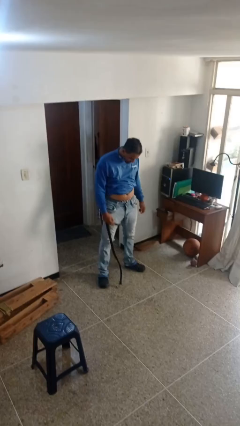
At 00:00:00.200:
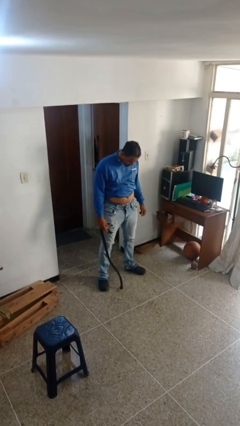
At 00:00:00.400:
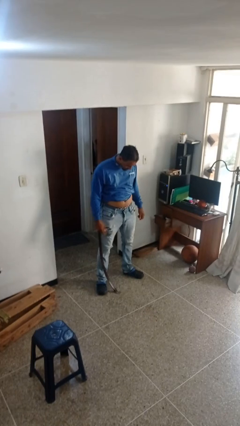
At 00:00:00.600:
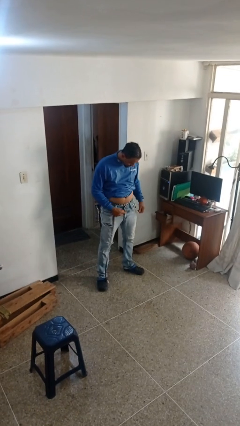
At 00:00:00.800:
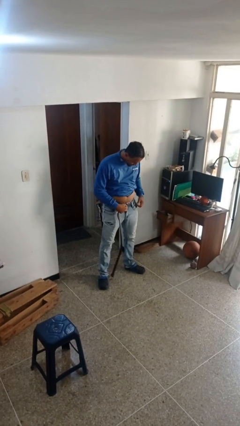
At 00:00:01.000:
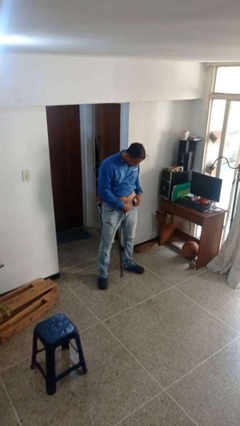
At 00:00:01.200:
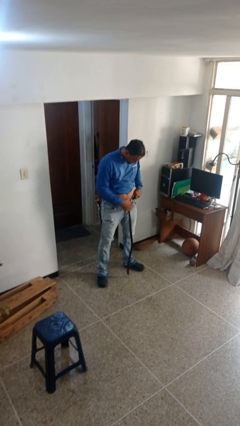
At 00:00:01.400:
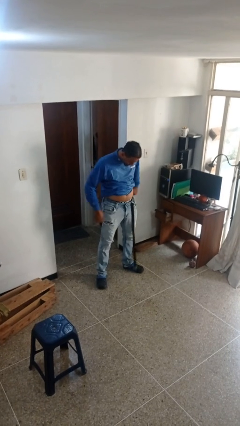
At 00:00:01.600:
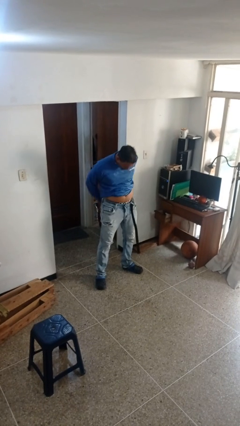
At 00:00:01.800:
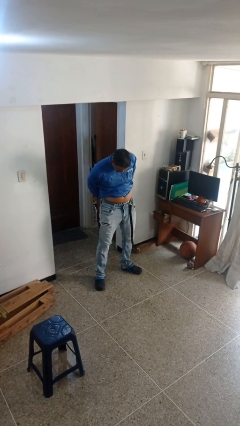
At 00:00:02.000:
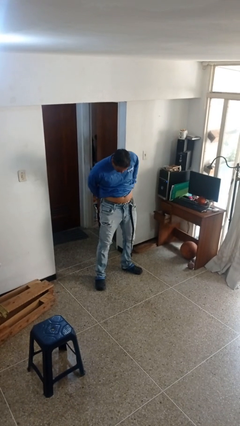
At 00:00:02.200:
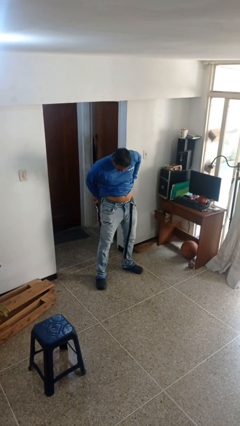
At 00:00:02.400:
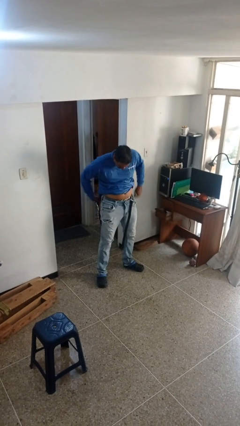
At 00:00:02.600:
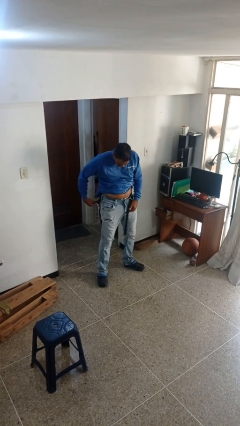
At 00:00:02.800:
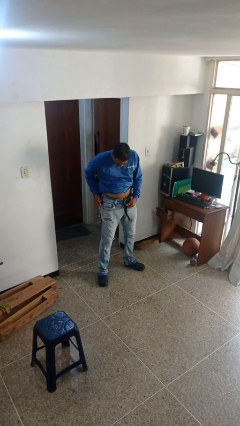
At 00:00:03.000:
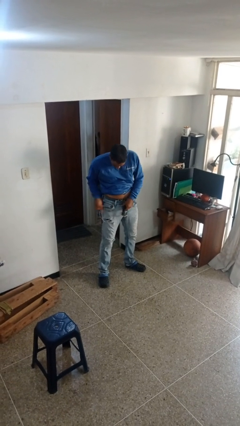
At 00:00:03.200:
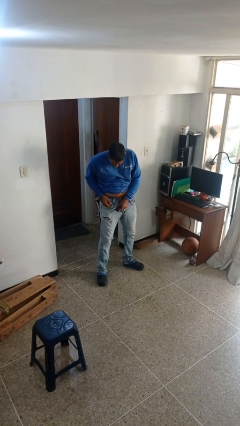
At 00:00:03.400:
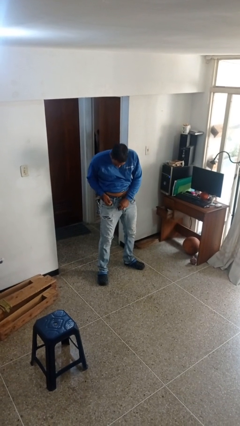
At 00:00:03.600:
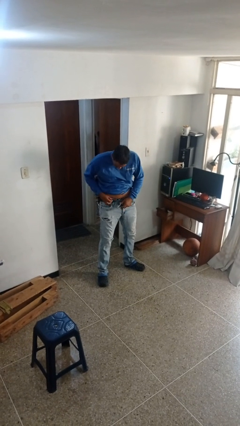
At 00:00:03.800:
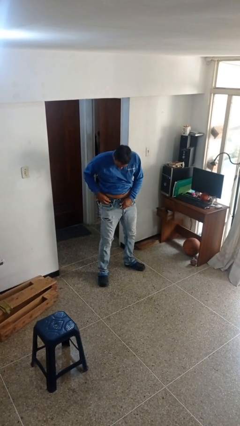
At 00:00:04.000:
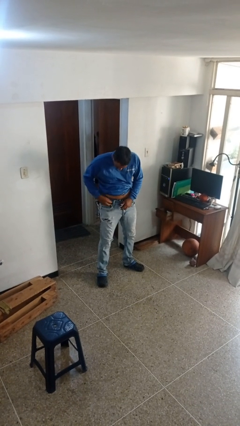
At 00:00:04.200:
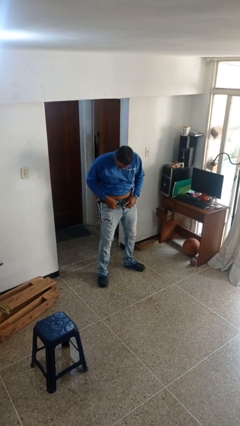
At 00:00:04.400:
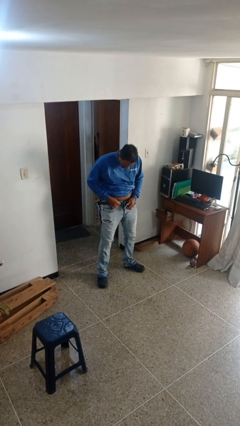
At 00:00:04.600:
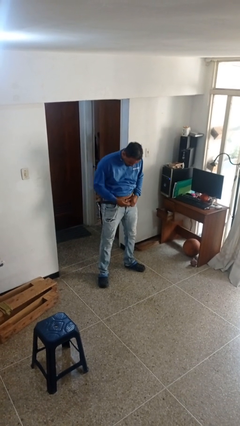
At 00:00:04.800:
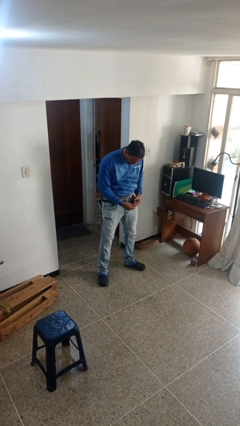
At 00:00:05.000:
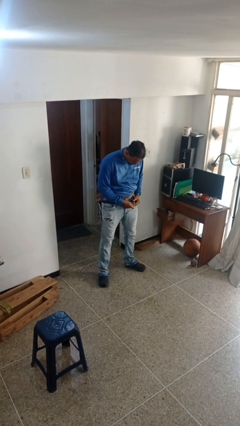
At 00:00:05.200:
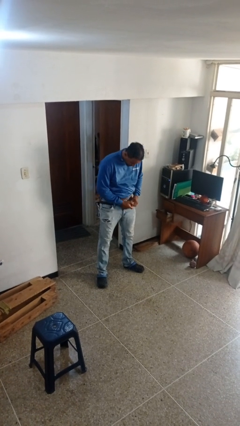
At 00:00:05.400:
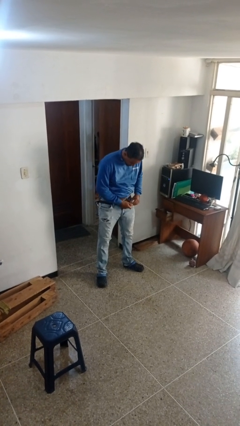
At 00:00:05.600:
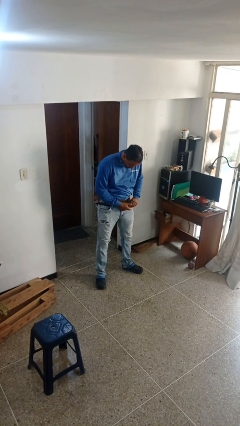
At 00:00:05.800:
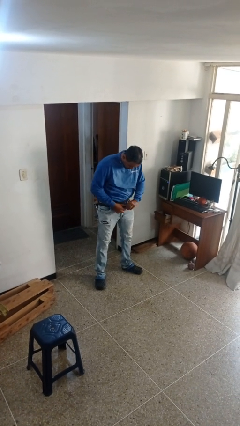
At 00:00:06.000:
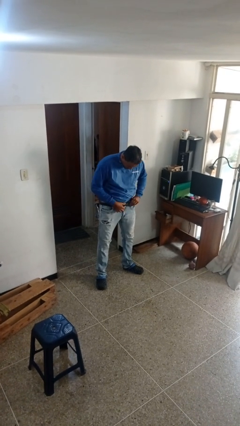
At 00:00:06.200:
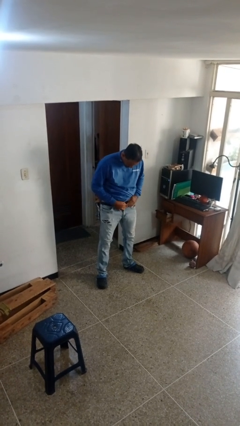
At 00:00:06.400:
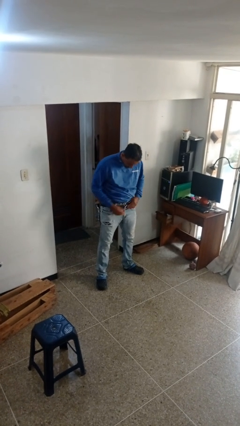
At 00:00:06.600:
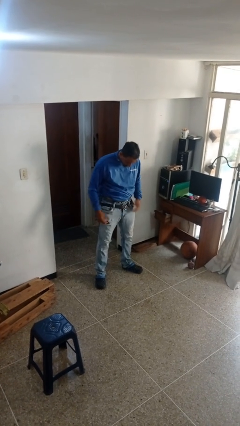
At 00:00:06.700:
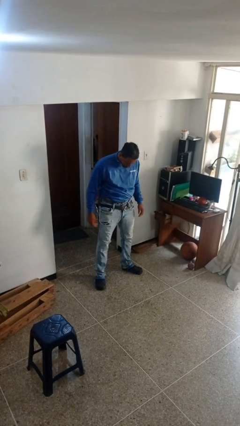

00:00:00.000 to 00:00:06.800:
person puts on belt

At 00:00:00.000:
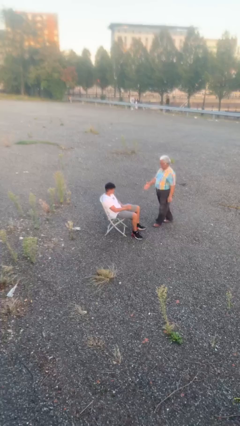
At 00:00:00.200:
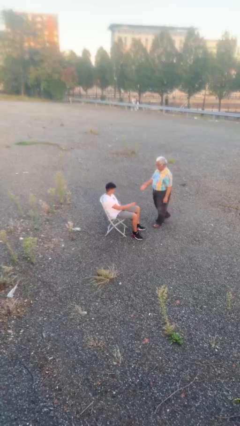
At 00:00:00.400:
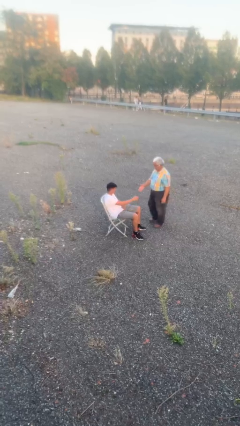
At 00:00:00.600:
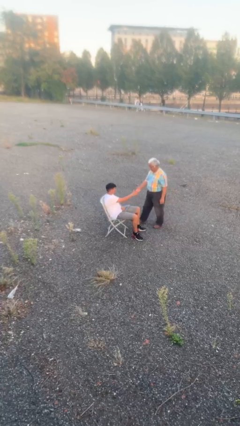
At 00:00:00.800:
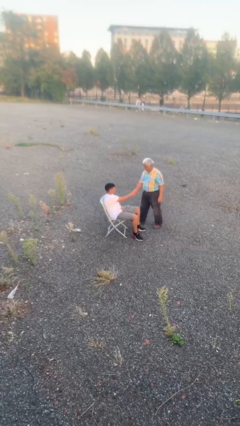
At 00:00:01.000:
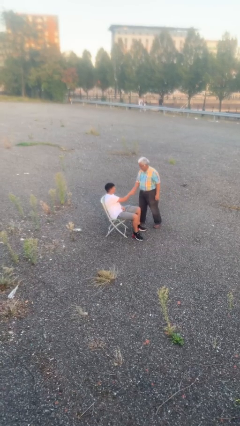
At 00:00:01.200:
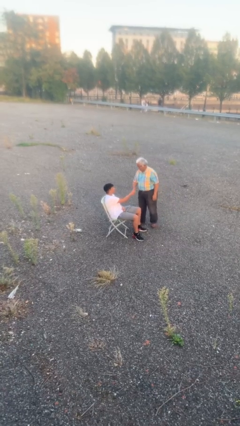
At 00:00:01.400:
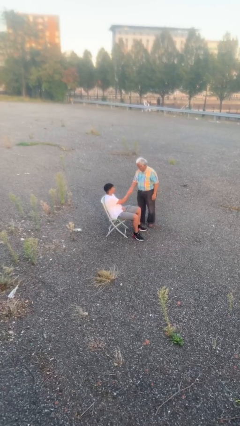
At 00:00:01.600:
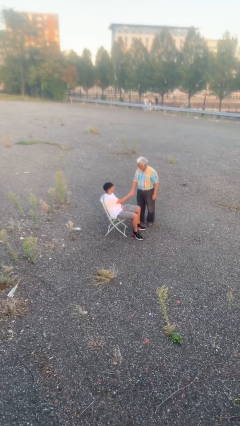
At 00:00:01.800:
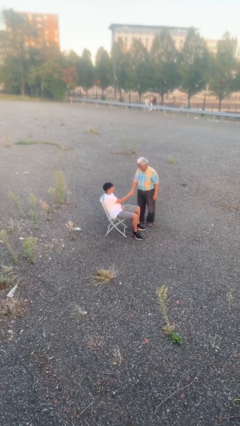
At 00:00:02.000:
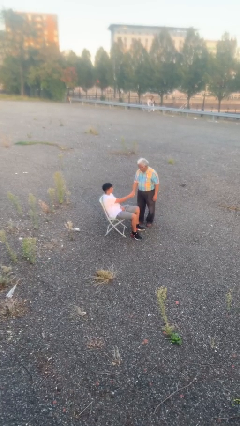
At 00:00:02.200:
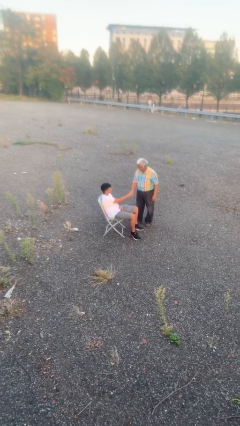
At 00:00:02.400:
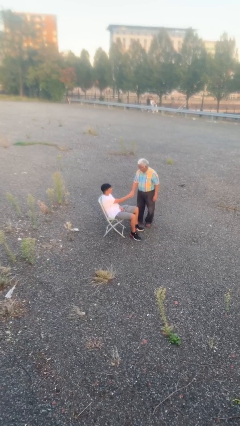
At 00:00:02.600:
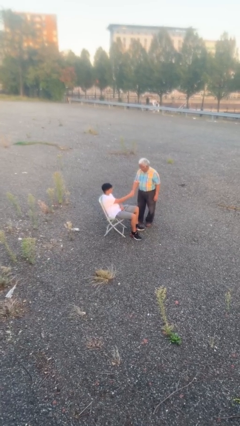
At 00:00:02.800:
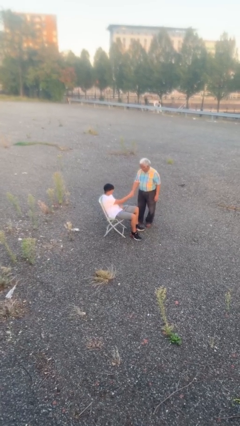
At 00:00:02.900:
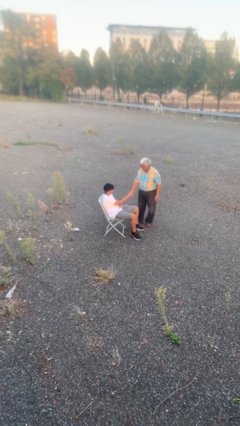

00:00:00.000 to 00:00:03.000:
person shakes hand

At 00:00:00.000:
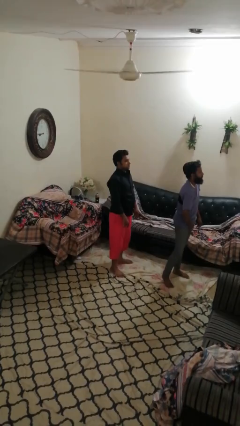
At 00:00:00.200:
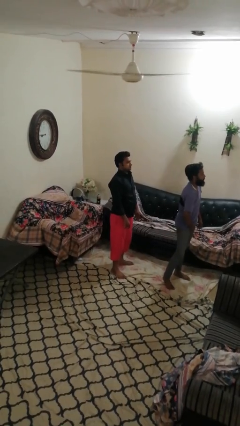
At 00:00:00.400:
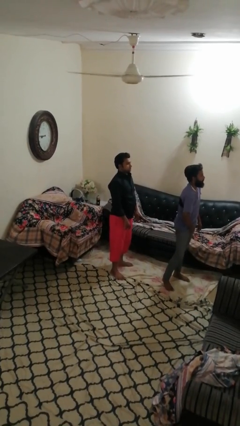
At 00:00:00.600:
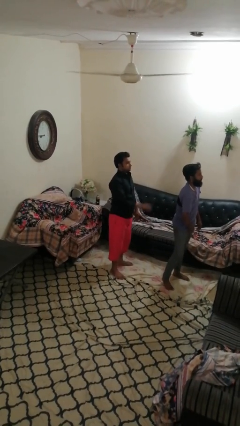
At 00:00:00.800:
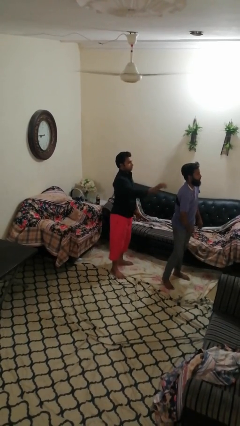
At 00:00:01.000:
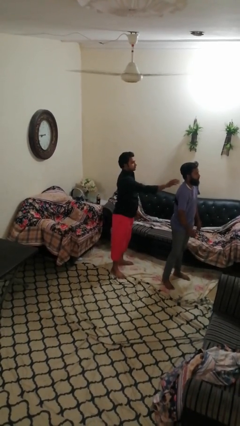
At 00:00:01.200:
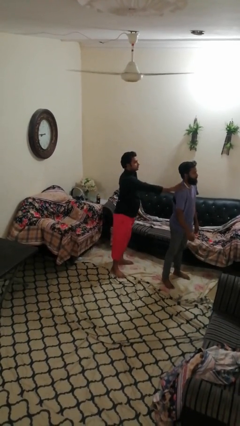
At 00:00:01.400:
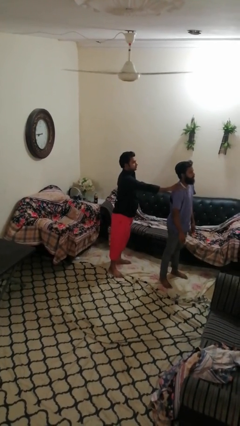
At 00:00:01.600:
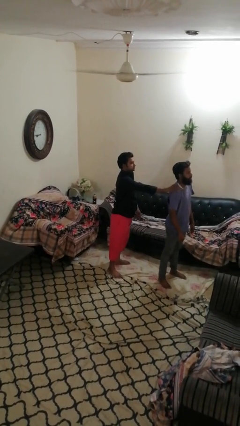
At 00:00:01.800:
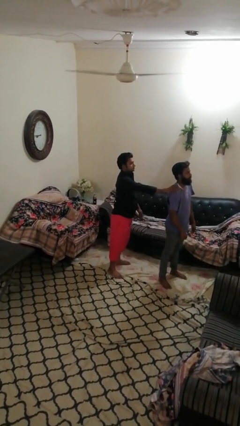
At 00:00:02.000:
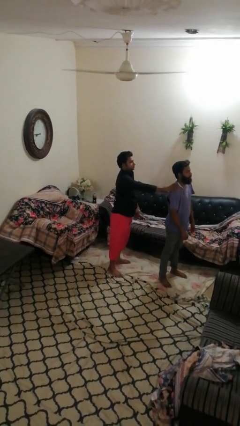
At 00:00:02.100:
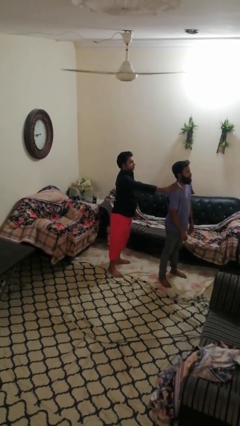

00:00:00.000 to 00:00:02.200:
person grabs person by shoulder

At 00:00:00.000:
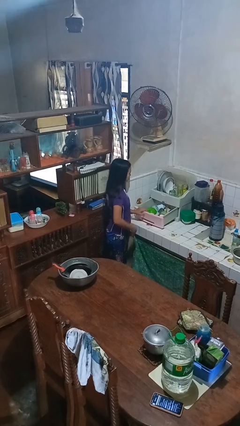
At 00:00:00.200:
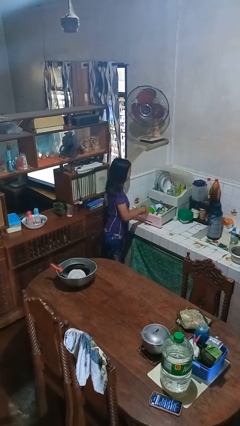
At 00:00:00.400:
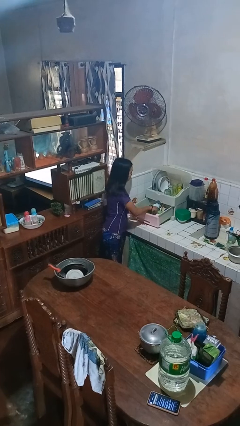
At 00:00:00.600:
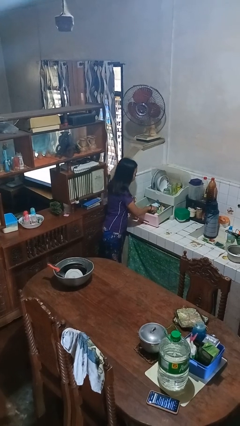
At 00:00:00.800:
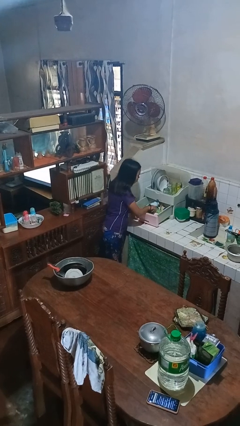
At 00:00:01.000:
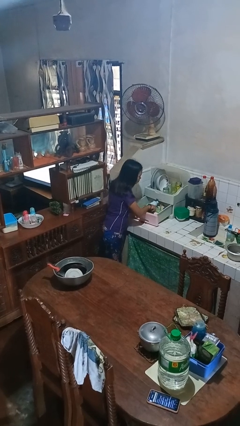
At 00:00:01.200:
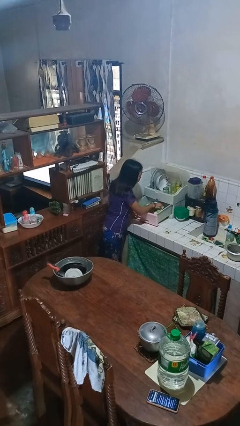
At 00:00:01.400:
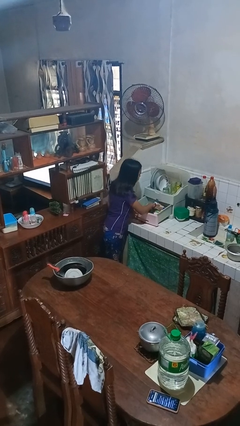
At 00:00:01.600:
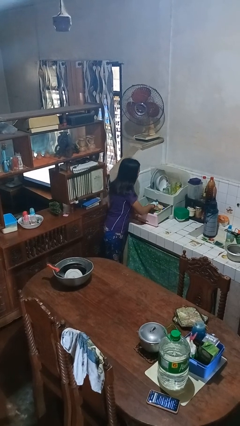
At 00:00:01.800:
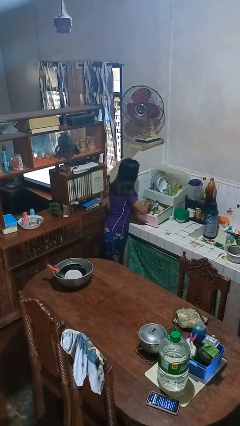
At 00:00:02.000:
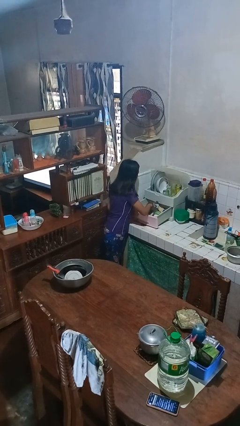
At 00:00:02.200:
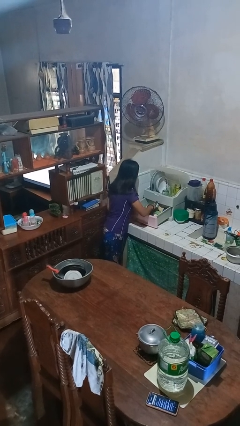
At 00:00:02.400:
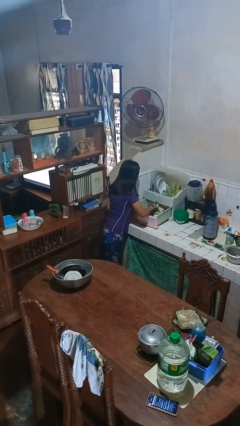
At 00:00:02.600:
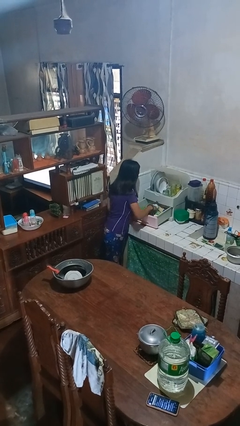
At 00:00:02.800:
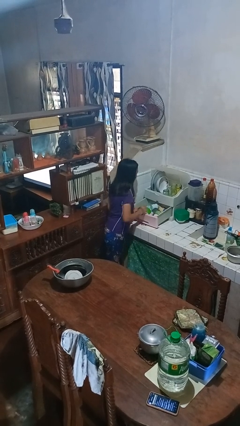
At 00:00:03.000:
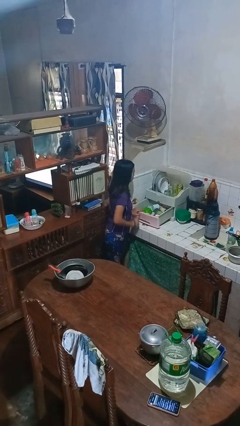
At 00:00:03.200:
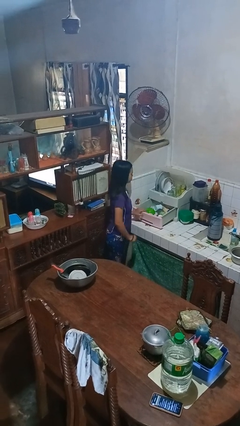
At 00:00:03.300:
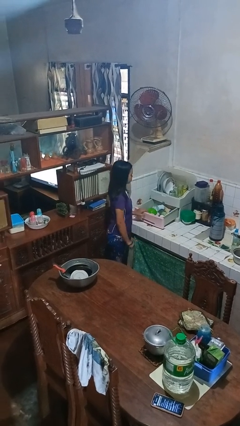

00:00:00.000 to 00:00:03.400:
person searches in kitchen drawer

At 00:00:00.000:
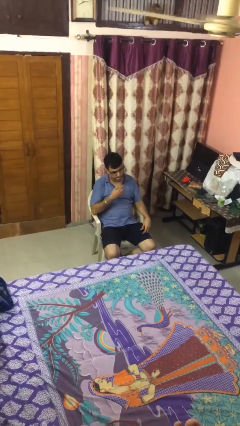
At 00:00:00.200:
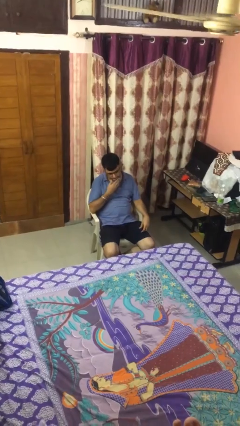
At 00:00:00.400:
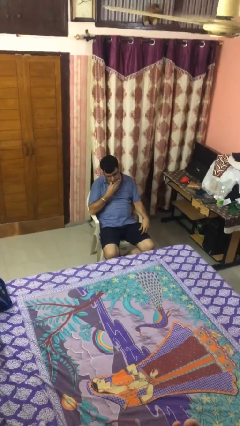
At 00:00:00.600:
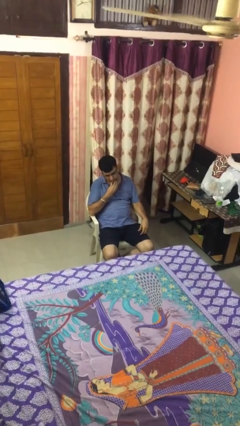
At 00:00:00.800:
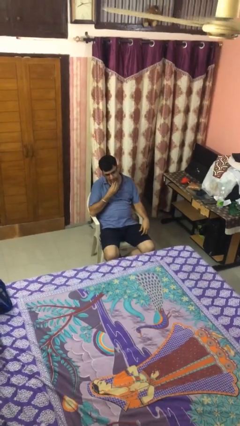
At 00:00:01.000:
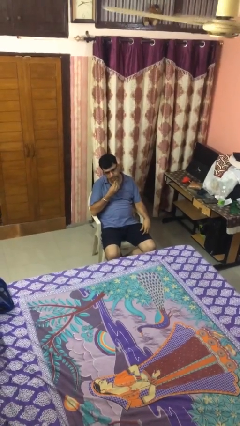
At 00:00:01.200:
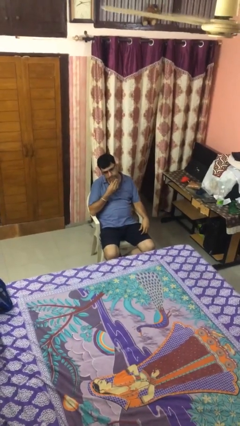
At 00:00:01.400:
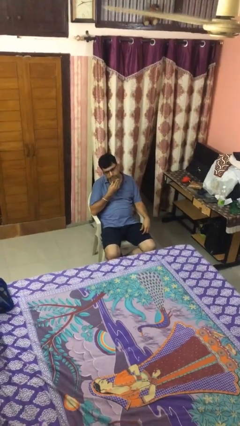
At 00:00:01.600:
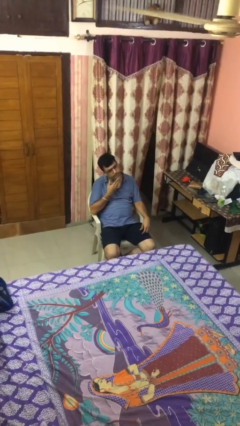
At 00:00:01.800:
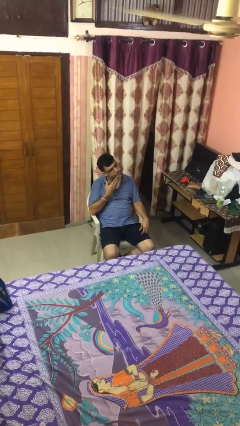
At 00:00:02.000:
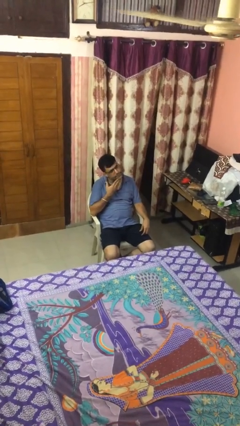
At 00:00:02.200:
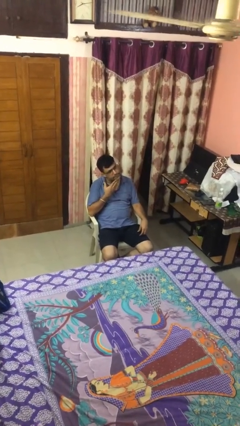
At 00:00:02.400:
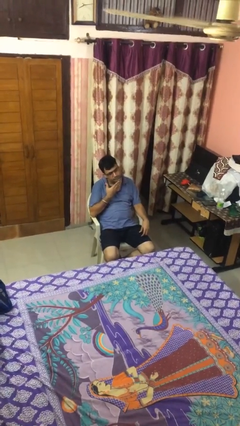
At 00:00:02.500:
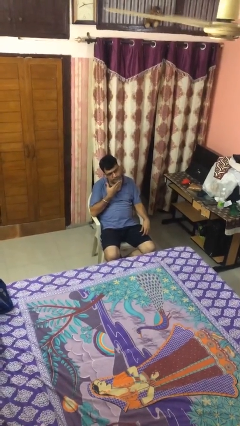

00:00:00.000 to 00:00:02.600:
person strokes chin
